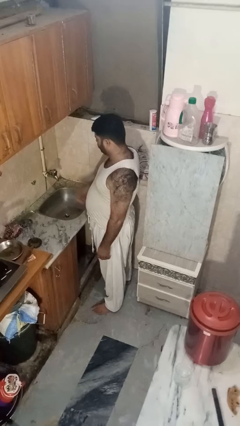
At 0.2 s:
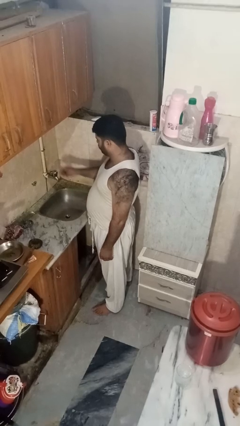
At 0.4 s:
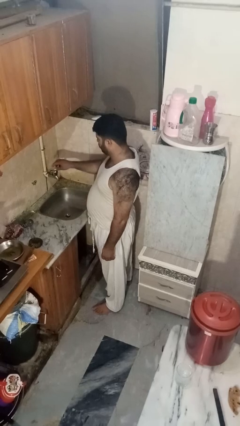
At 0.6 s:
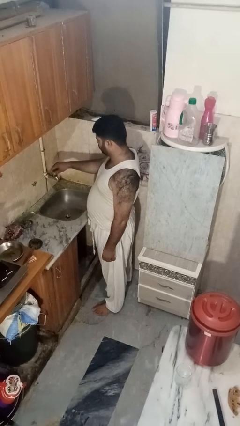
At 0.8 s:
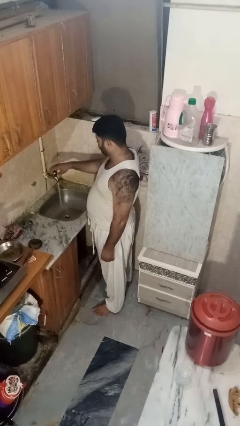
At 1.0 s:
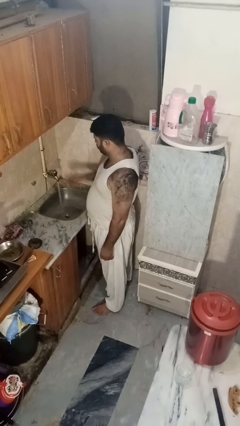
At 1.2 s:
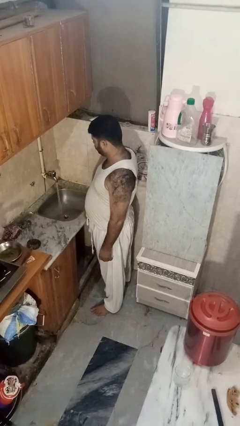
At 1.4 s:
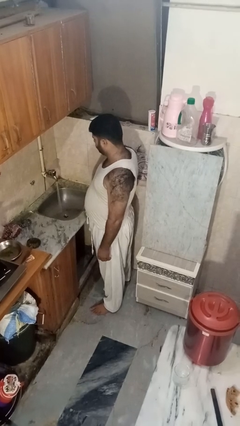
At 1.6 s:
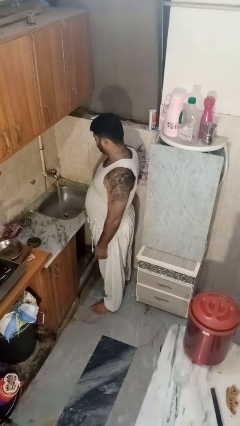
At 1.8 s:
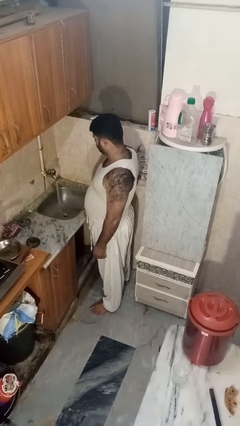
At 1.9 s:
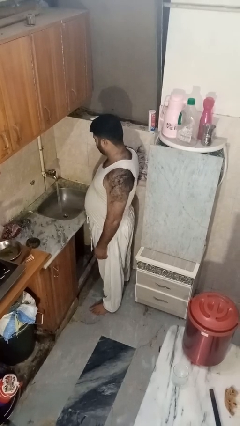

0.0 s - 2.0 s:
person turns on faucet

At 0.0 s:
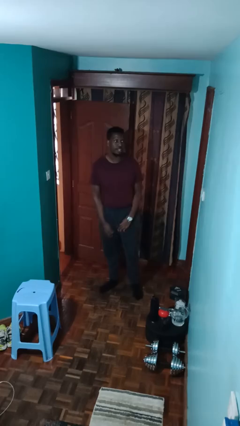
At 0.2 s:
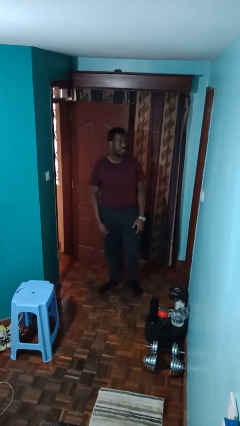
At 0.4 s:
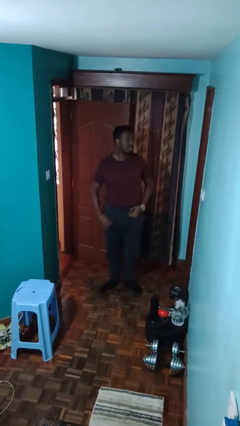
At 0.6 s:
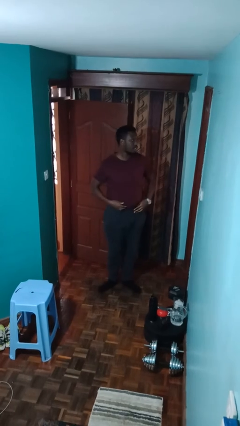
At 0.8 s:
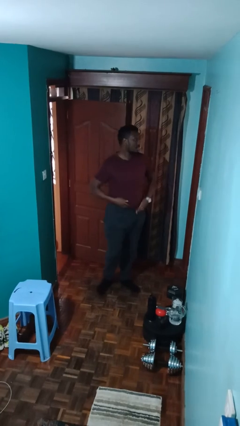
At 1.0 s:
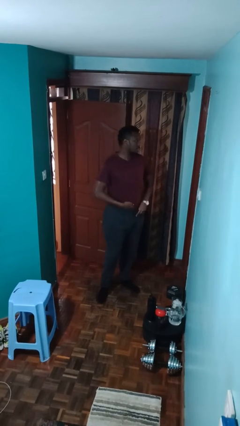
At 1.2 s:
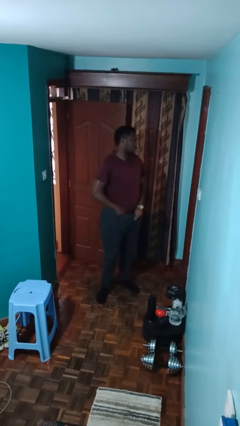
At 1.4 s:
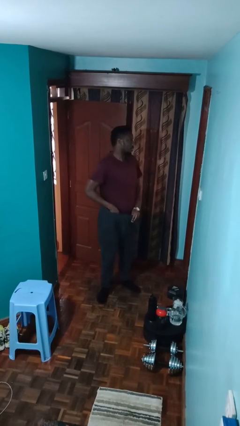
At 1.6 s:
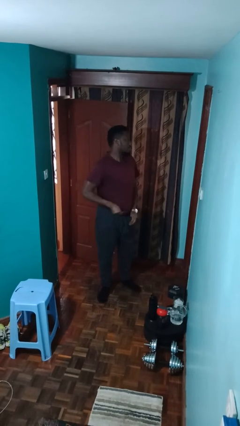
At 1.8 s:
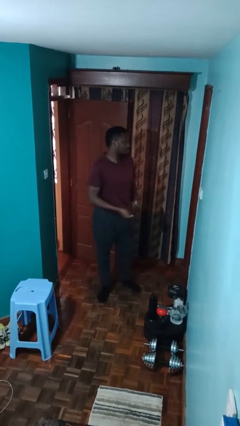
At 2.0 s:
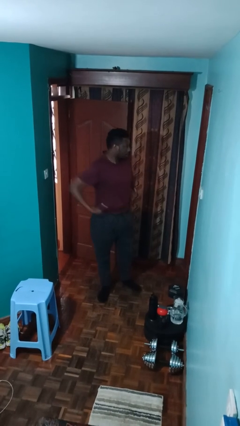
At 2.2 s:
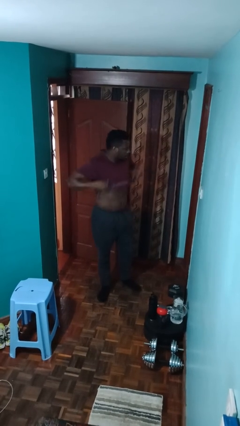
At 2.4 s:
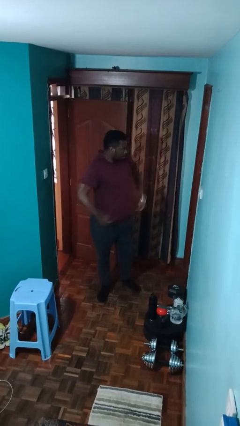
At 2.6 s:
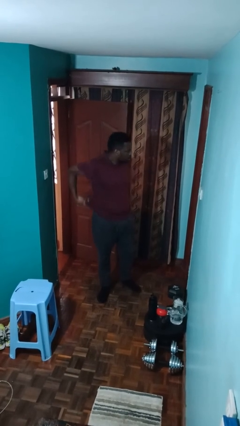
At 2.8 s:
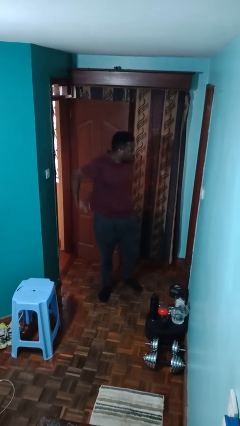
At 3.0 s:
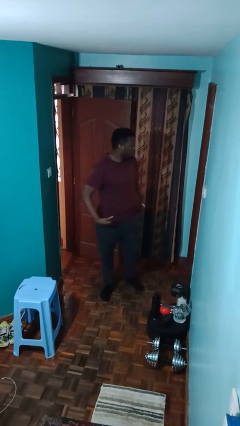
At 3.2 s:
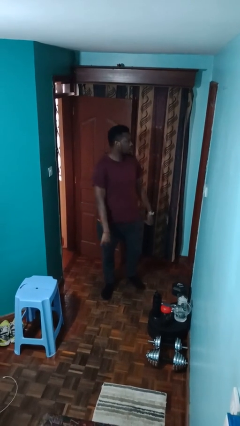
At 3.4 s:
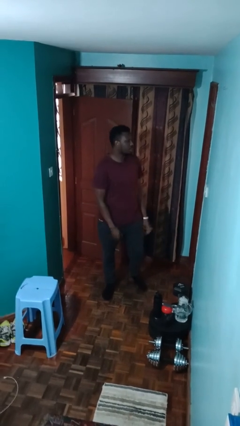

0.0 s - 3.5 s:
person untucks shirt

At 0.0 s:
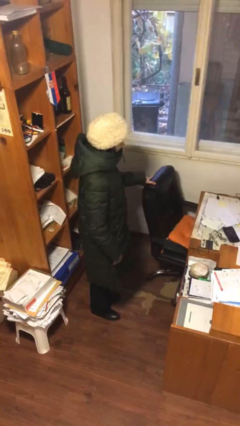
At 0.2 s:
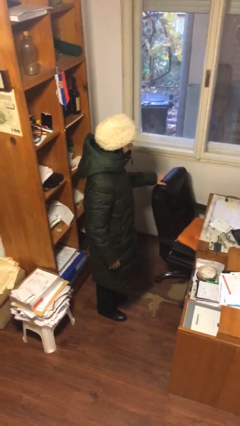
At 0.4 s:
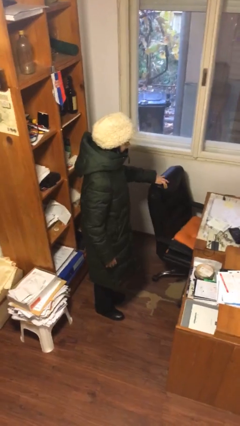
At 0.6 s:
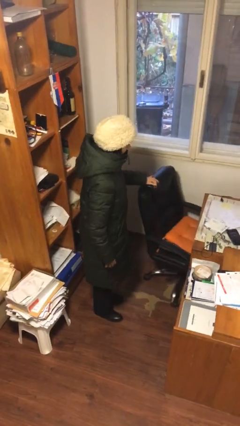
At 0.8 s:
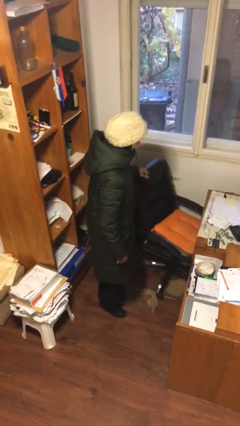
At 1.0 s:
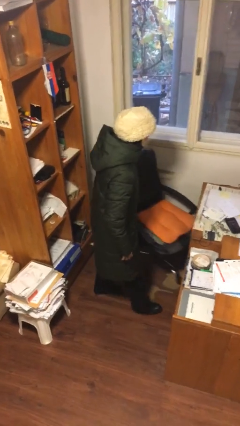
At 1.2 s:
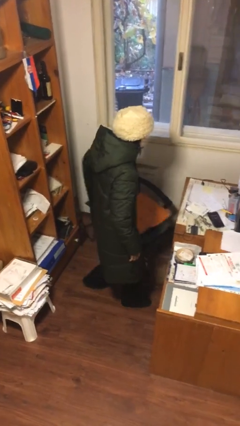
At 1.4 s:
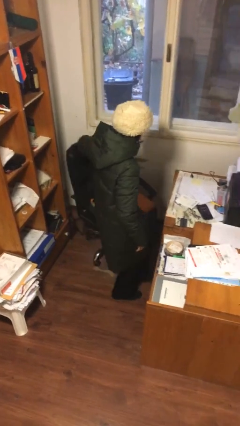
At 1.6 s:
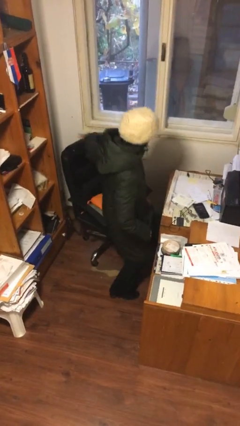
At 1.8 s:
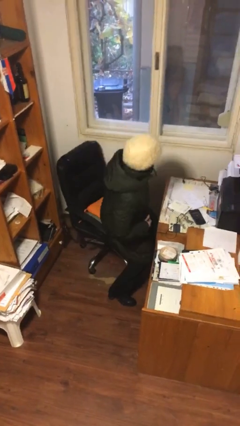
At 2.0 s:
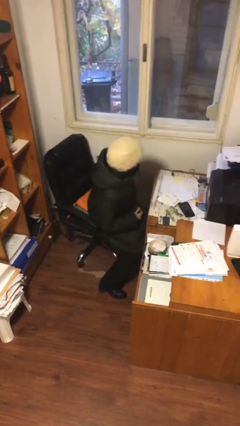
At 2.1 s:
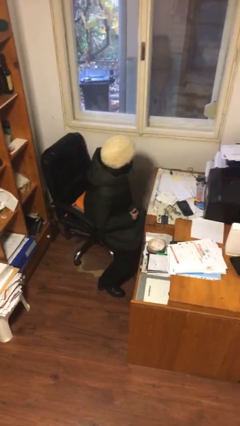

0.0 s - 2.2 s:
person sits down

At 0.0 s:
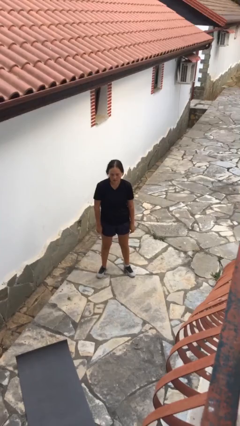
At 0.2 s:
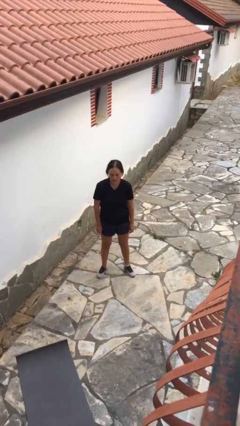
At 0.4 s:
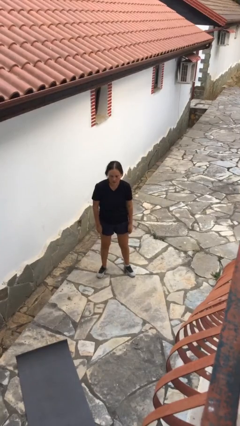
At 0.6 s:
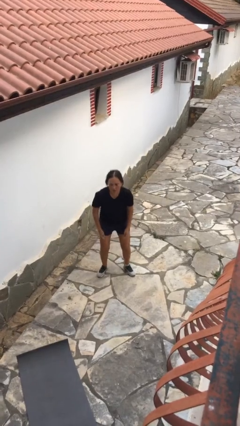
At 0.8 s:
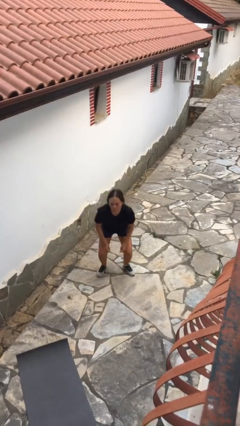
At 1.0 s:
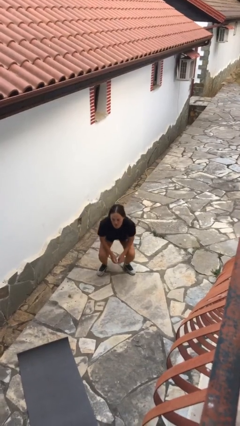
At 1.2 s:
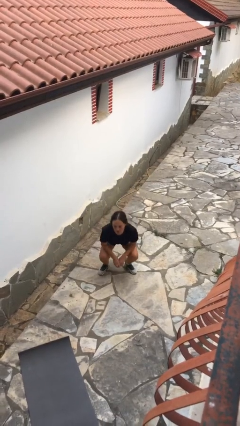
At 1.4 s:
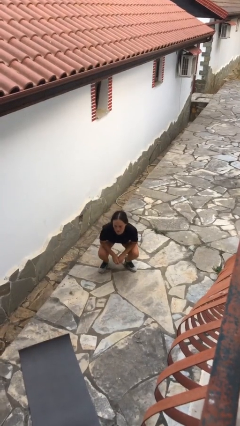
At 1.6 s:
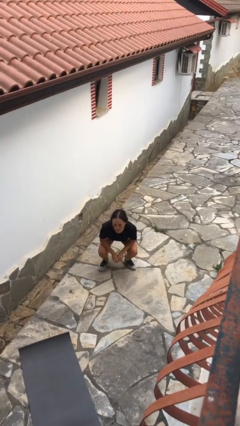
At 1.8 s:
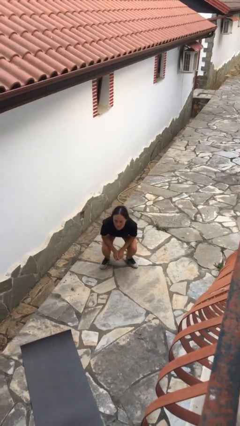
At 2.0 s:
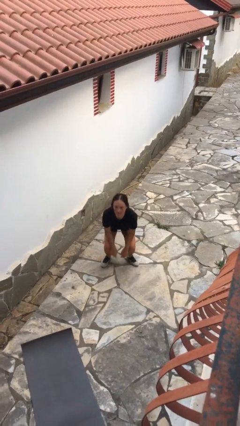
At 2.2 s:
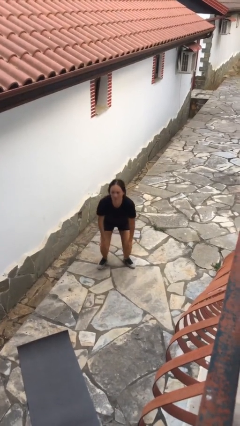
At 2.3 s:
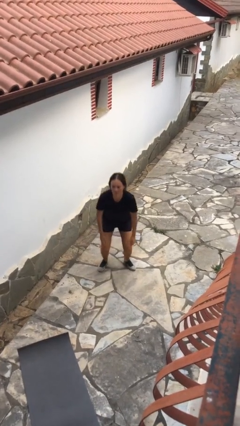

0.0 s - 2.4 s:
person squats

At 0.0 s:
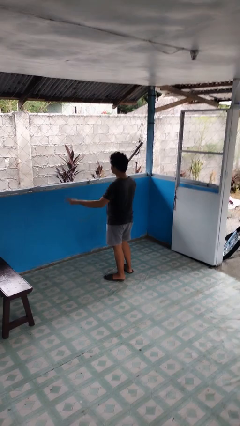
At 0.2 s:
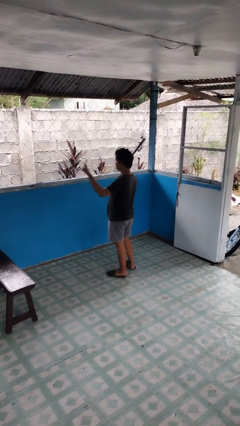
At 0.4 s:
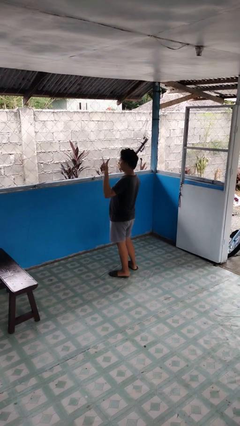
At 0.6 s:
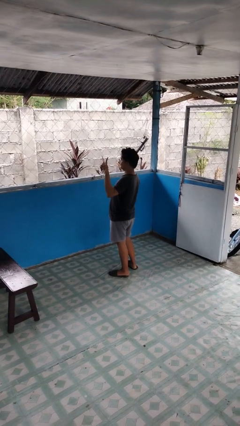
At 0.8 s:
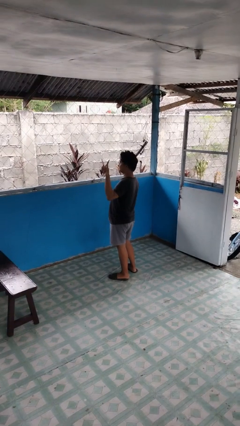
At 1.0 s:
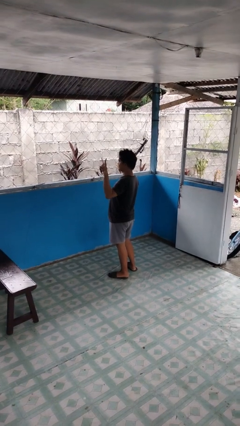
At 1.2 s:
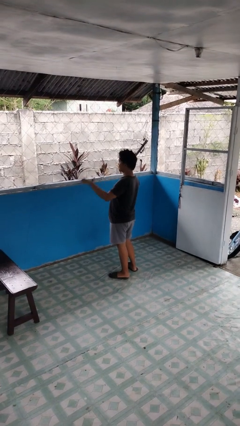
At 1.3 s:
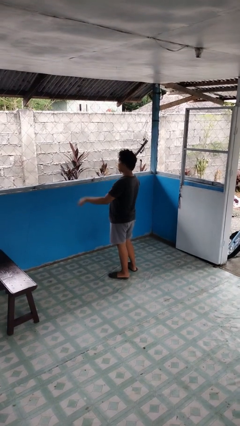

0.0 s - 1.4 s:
person gestures peace

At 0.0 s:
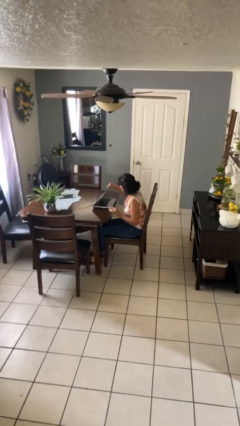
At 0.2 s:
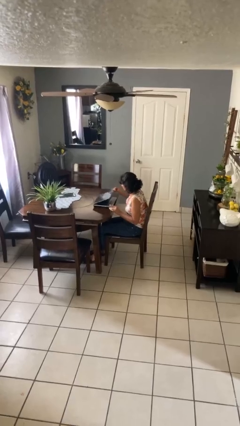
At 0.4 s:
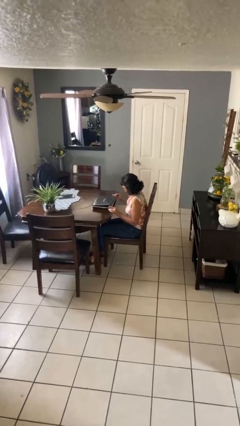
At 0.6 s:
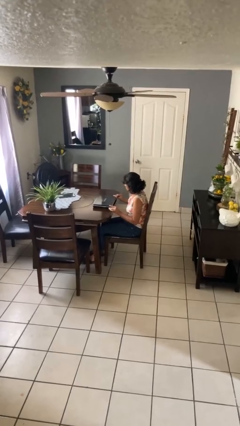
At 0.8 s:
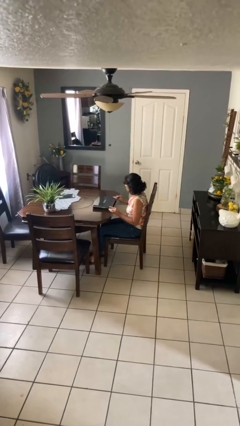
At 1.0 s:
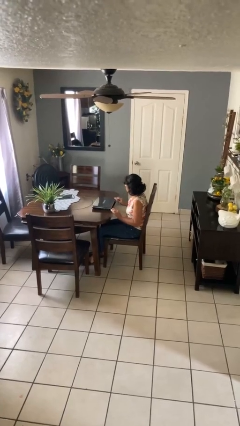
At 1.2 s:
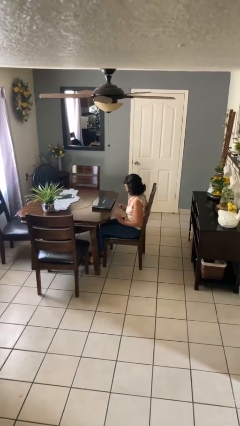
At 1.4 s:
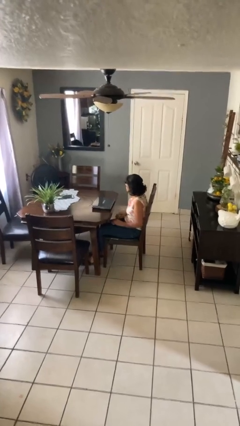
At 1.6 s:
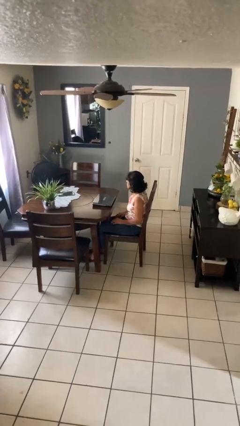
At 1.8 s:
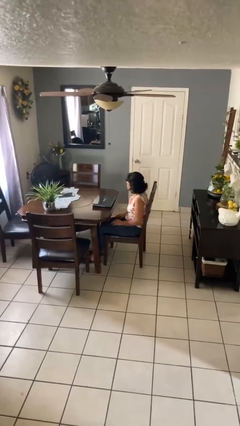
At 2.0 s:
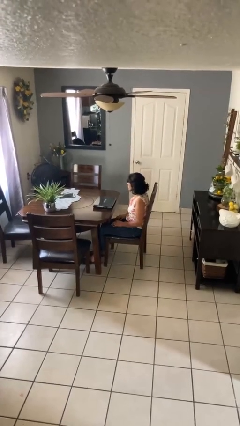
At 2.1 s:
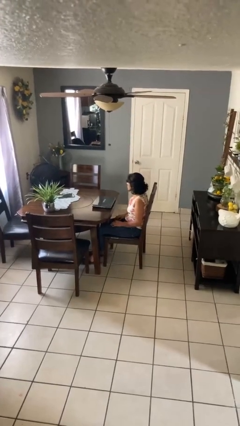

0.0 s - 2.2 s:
person closes laptop

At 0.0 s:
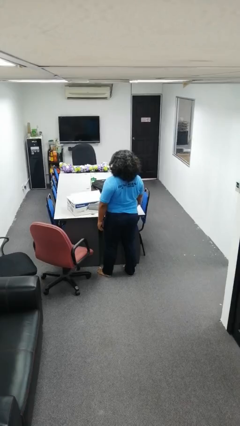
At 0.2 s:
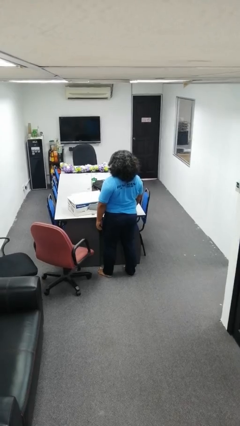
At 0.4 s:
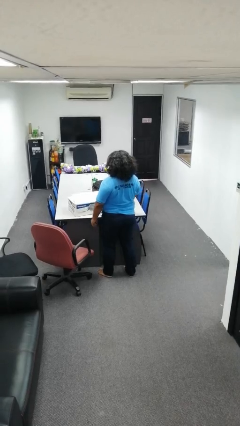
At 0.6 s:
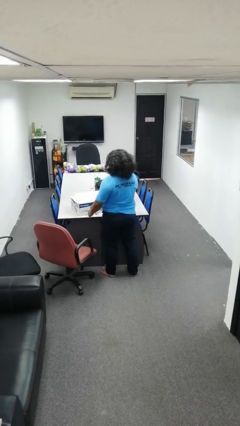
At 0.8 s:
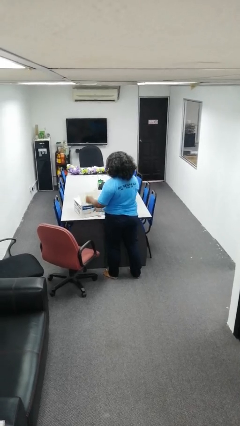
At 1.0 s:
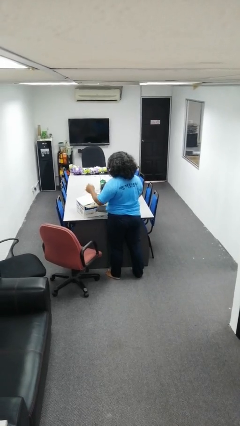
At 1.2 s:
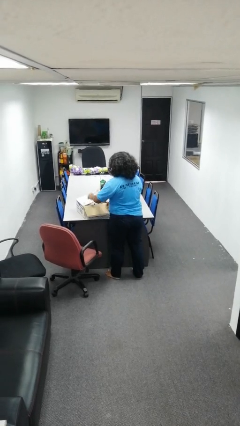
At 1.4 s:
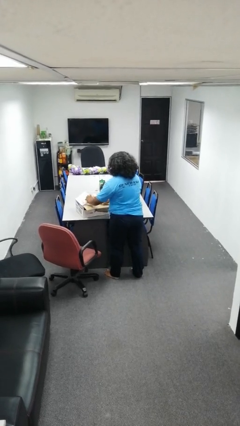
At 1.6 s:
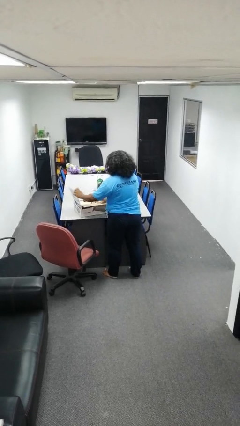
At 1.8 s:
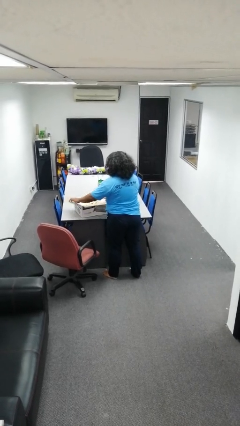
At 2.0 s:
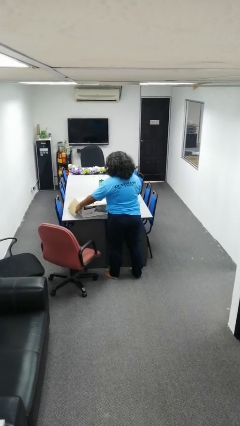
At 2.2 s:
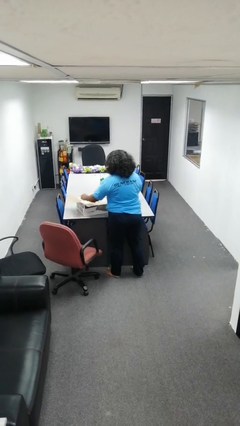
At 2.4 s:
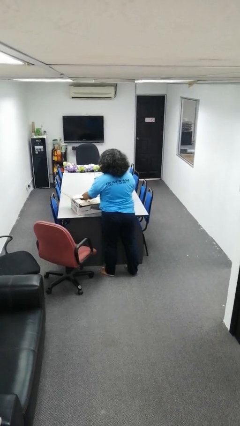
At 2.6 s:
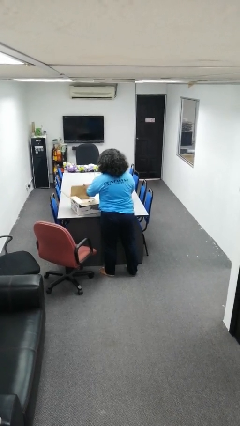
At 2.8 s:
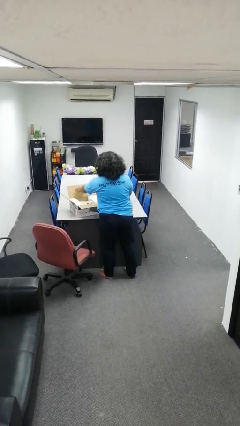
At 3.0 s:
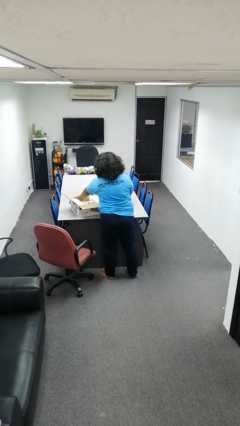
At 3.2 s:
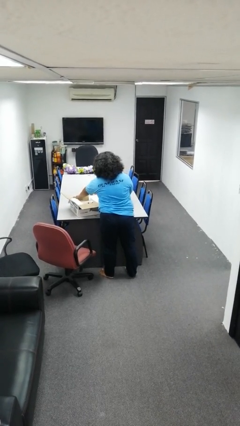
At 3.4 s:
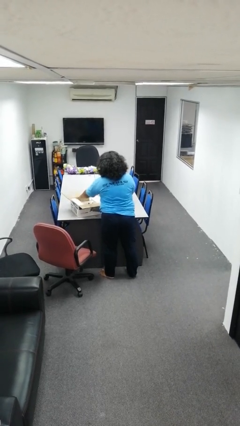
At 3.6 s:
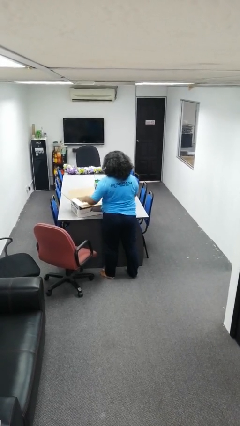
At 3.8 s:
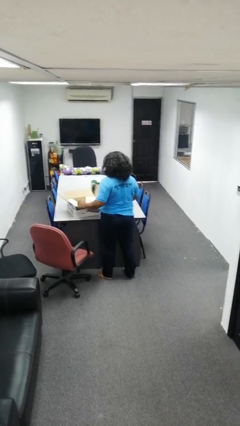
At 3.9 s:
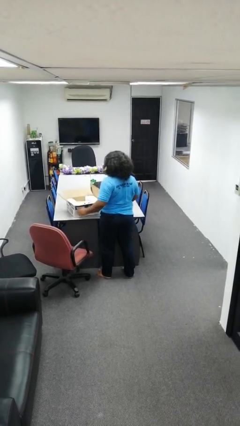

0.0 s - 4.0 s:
person opens box
